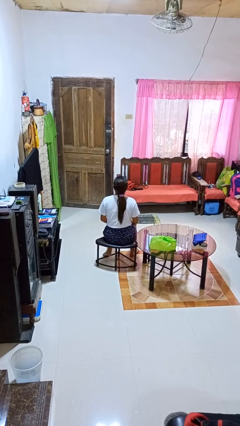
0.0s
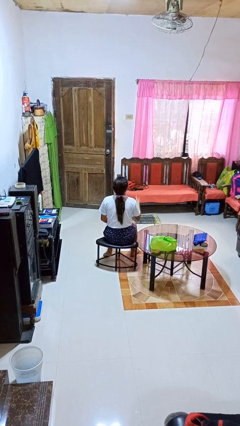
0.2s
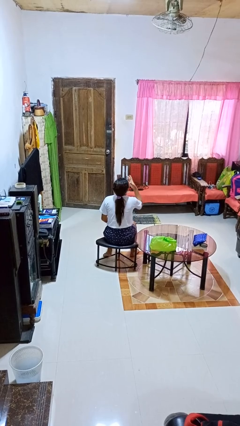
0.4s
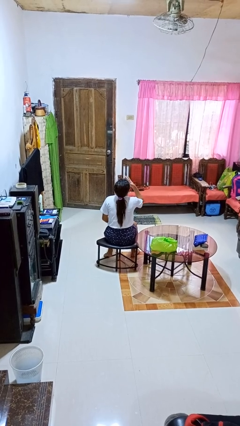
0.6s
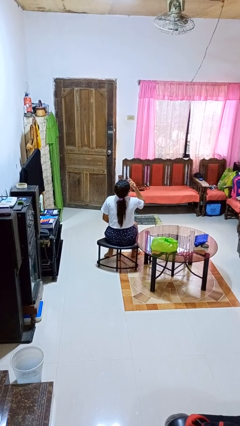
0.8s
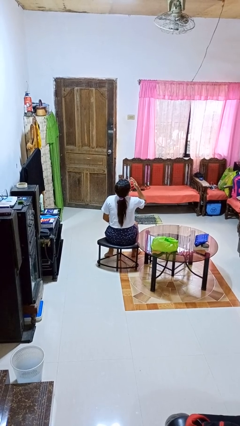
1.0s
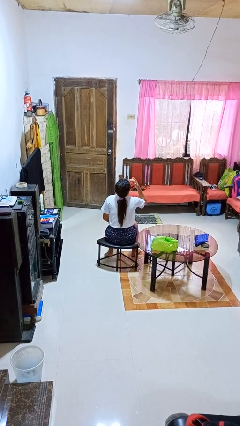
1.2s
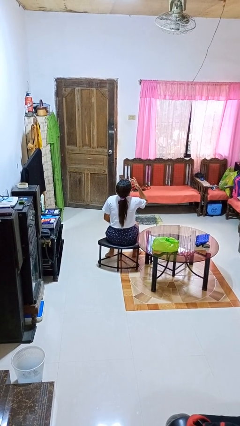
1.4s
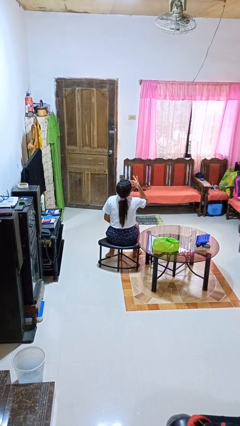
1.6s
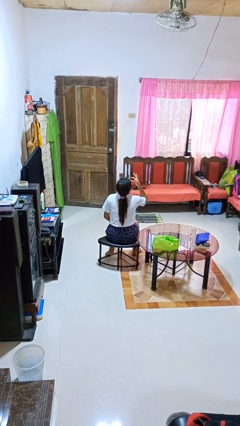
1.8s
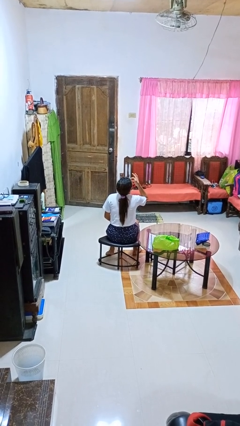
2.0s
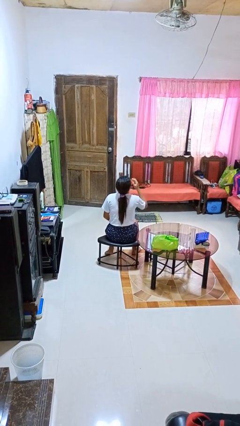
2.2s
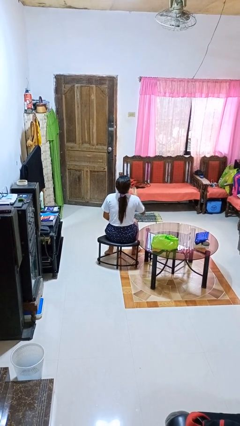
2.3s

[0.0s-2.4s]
person licks fingers

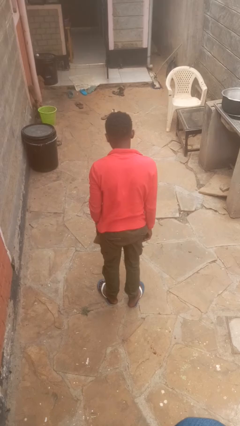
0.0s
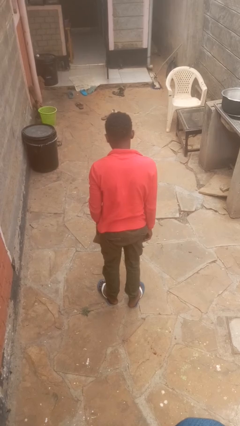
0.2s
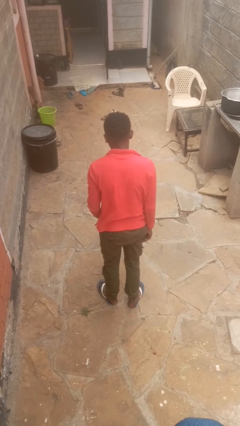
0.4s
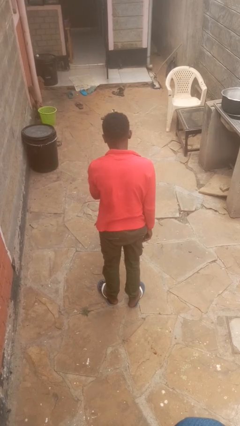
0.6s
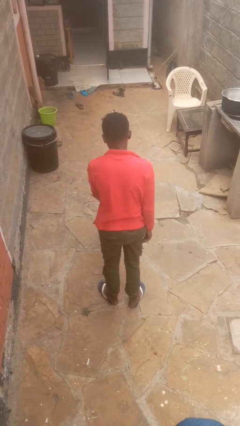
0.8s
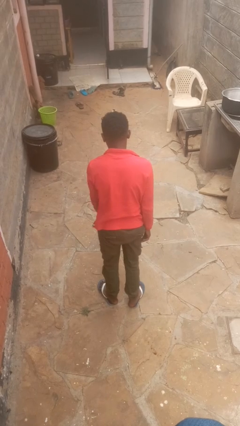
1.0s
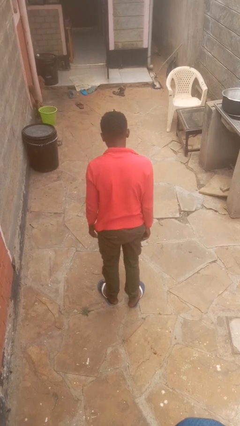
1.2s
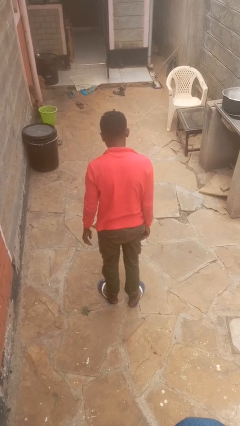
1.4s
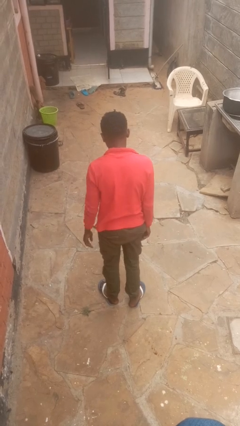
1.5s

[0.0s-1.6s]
person throws object to ground

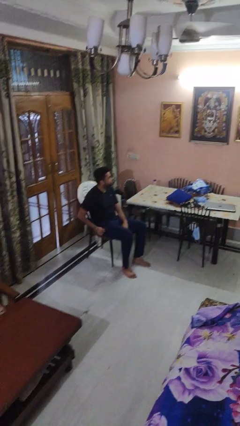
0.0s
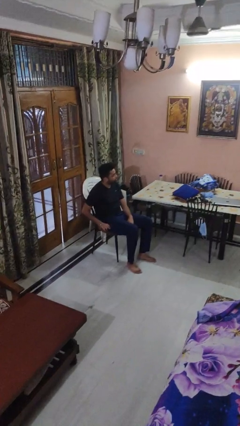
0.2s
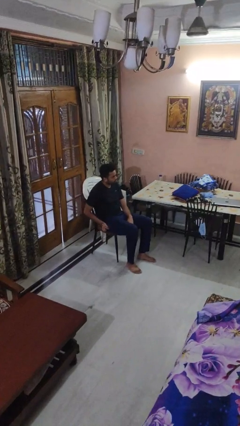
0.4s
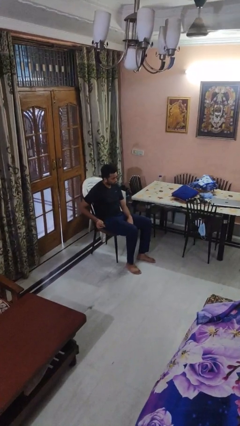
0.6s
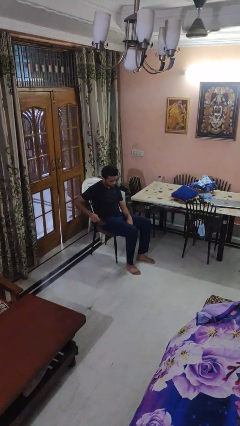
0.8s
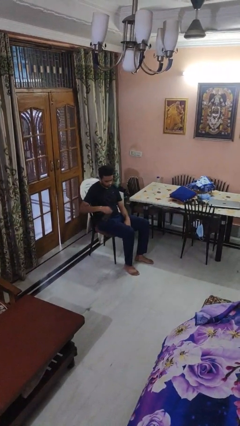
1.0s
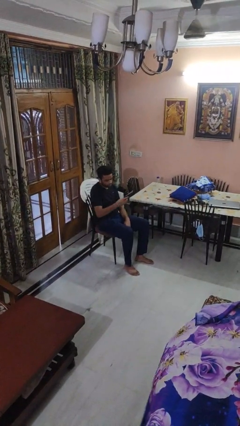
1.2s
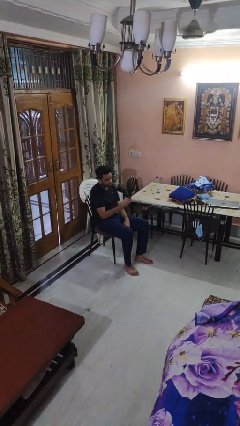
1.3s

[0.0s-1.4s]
person takes phone from pocket

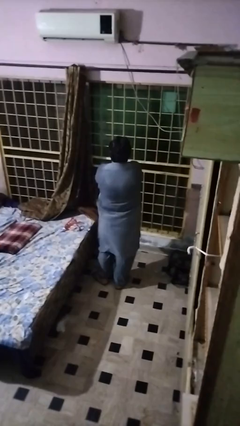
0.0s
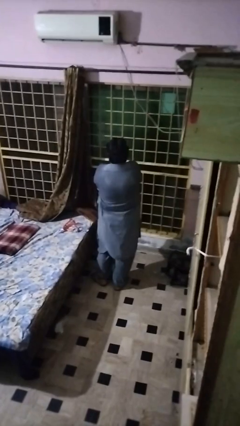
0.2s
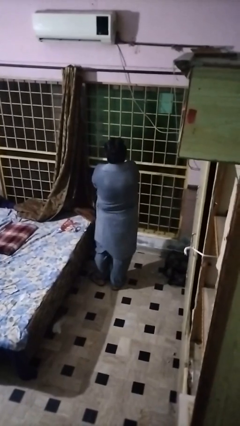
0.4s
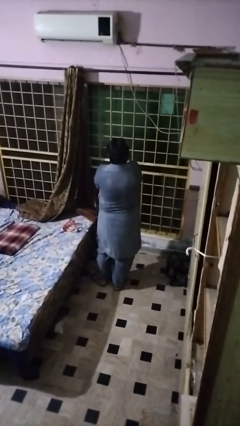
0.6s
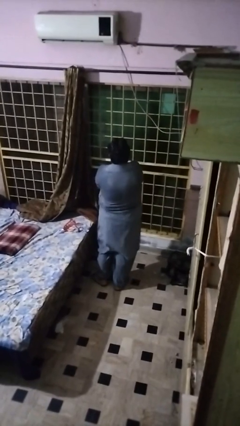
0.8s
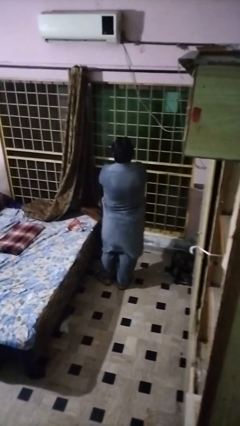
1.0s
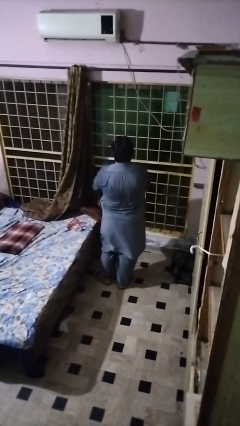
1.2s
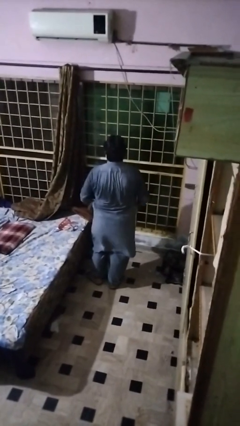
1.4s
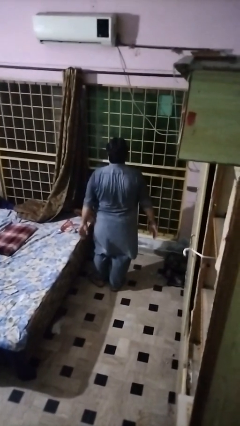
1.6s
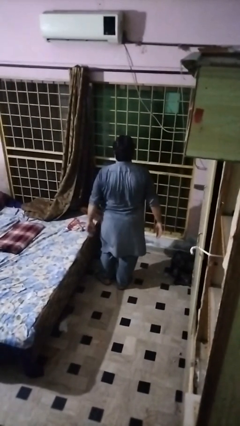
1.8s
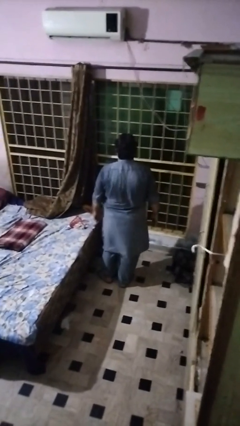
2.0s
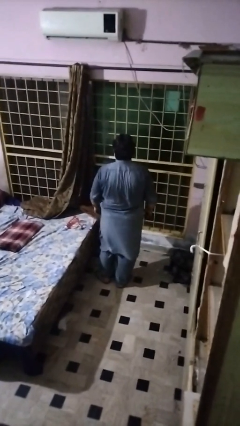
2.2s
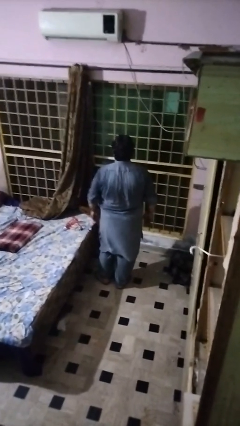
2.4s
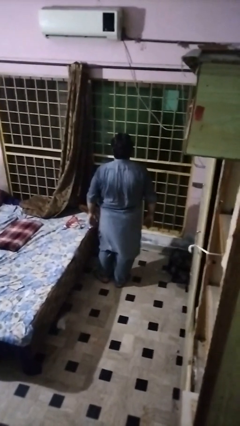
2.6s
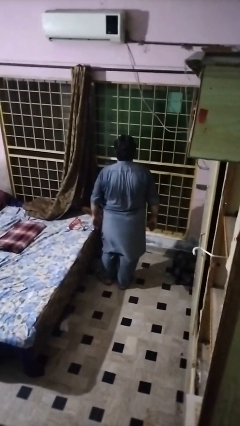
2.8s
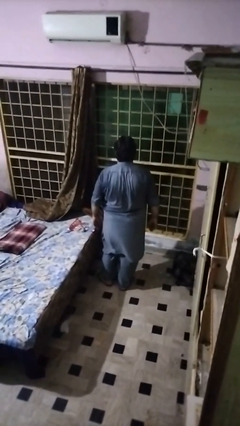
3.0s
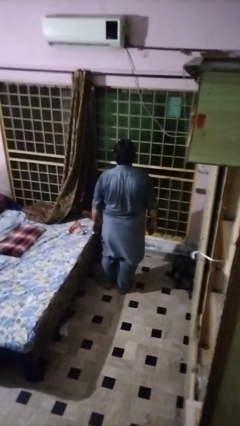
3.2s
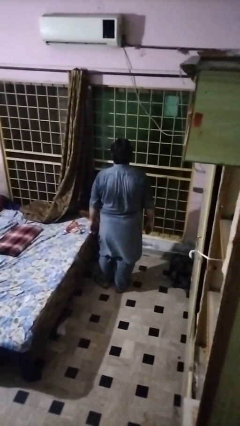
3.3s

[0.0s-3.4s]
person swats bug

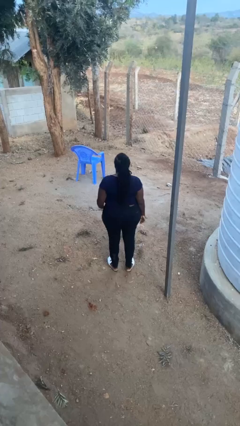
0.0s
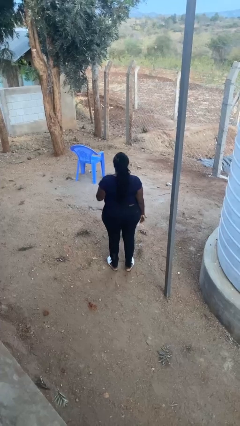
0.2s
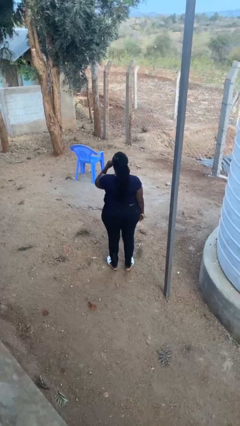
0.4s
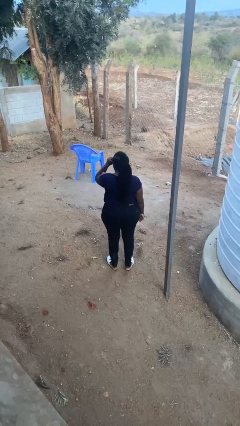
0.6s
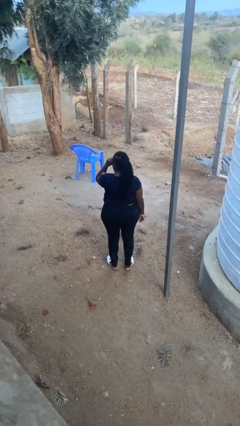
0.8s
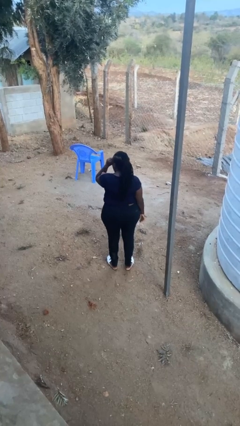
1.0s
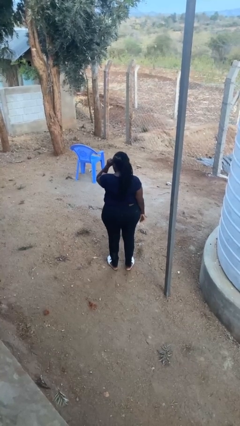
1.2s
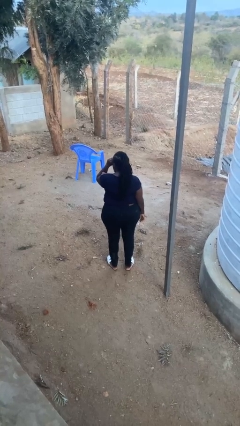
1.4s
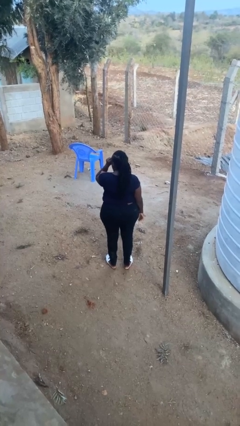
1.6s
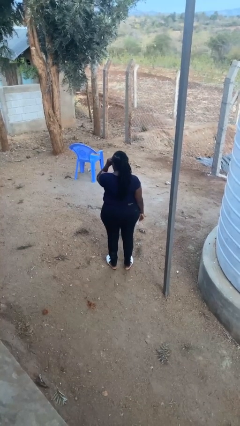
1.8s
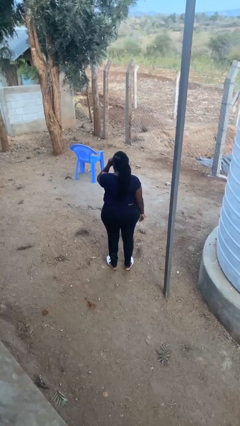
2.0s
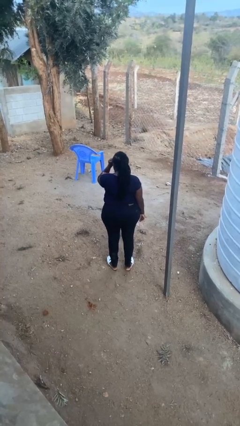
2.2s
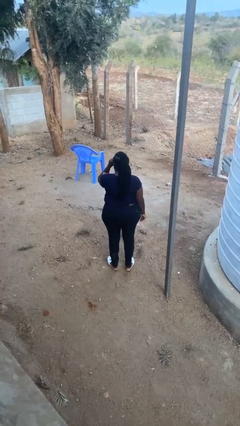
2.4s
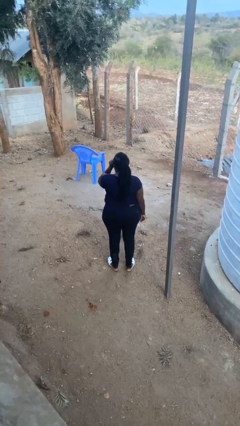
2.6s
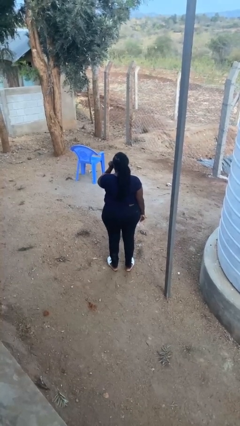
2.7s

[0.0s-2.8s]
person rubs eyes

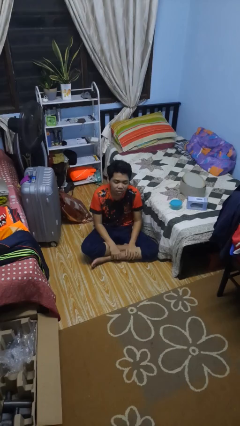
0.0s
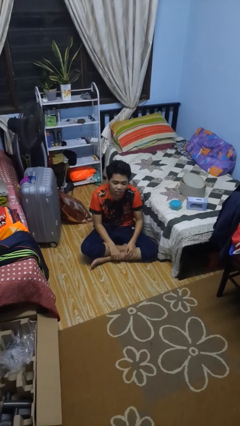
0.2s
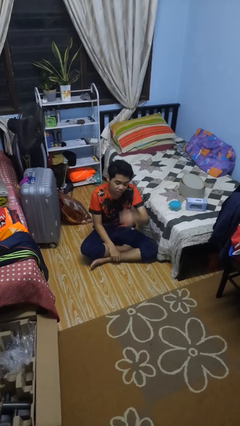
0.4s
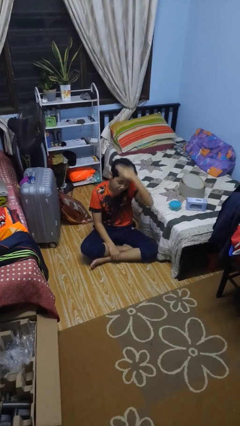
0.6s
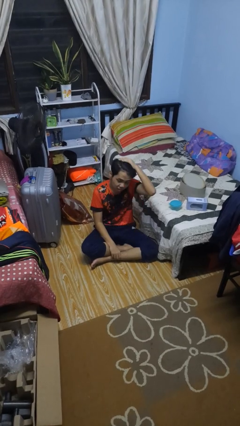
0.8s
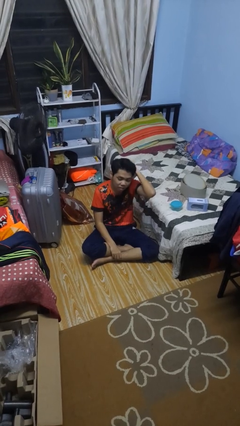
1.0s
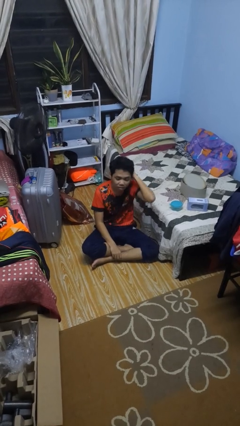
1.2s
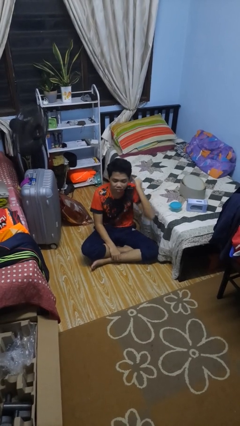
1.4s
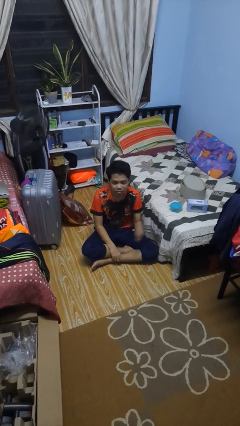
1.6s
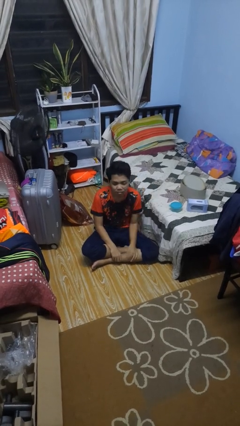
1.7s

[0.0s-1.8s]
person strokes hair

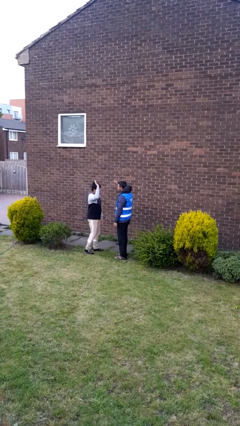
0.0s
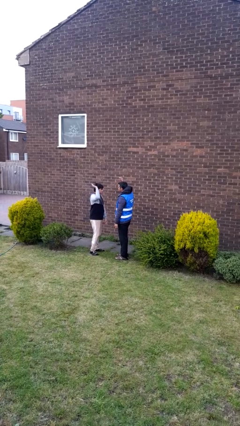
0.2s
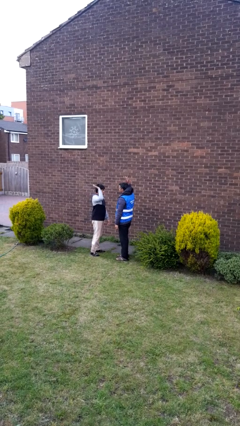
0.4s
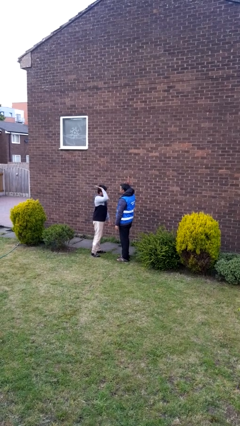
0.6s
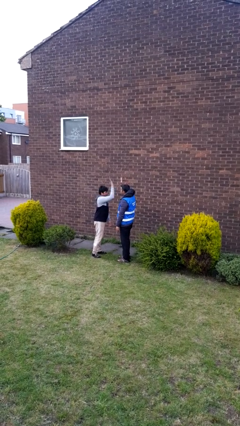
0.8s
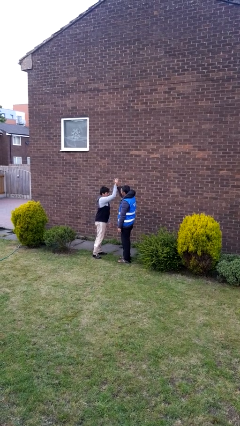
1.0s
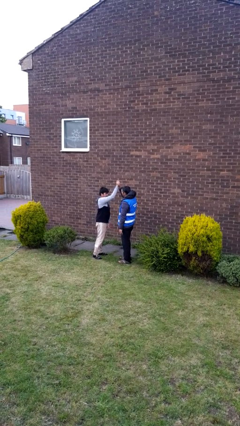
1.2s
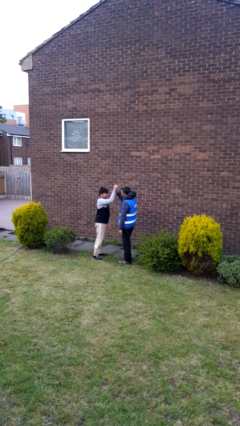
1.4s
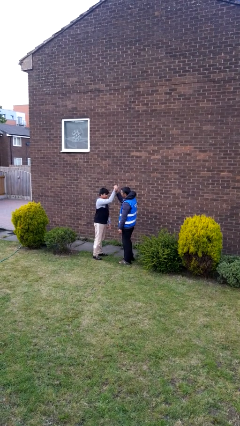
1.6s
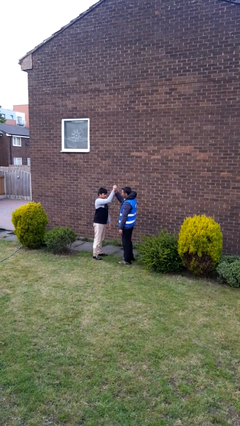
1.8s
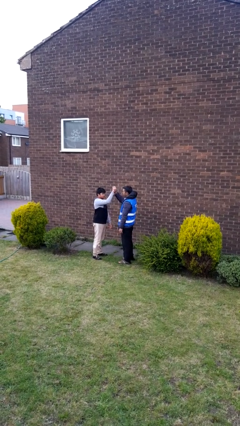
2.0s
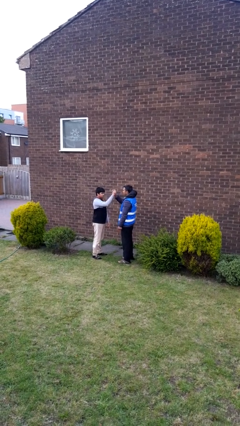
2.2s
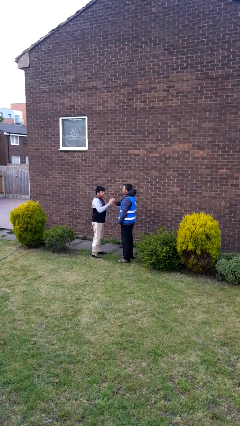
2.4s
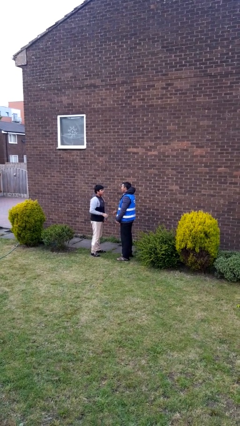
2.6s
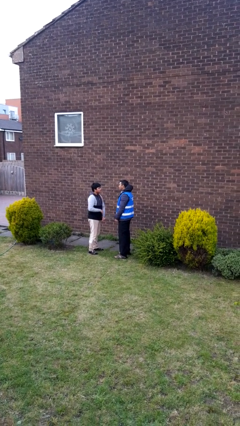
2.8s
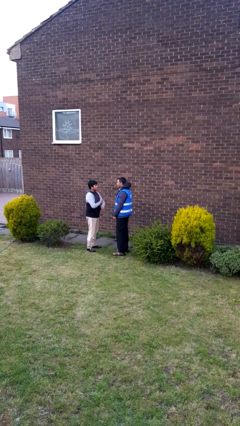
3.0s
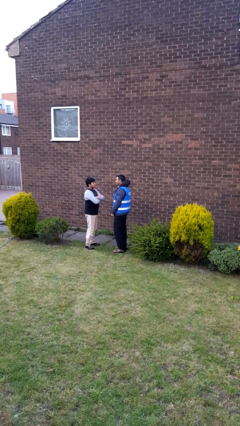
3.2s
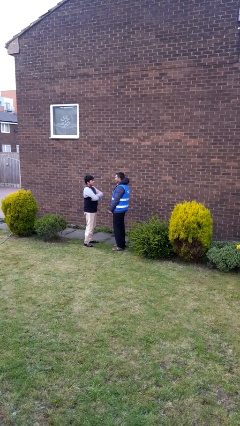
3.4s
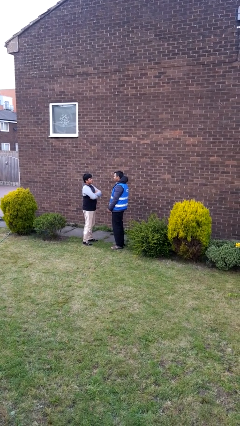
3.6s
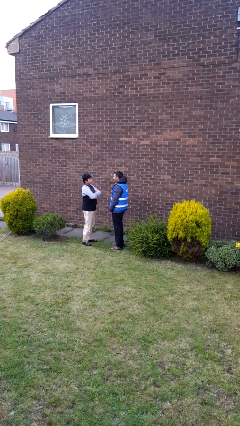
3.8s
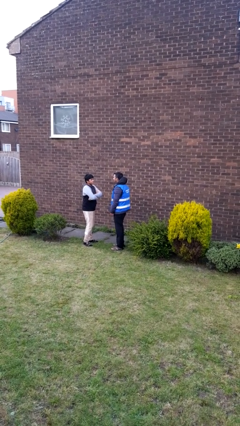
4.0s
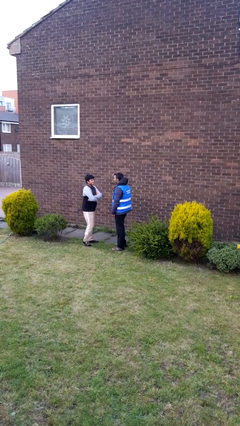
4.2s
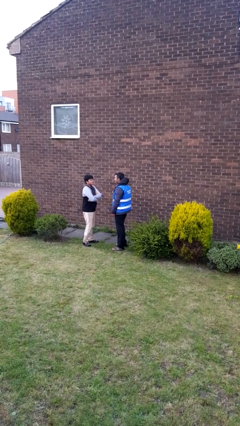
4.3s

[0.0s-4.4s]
person highfives hand
